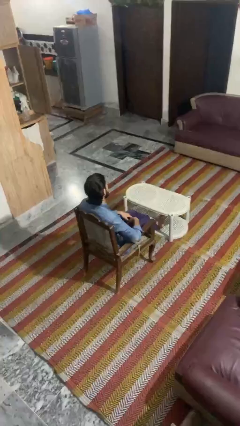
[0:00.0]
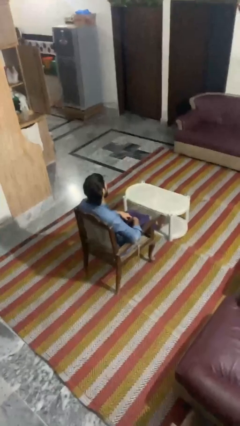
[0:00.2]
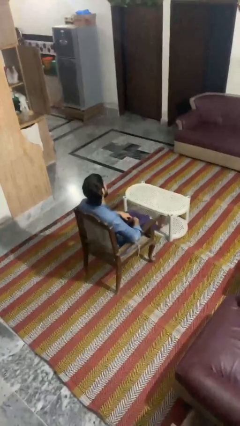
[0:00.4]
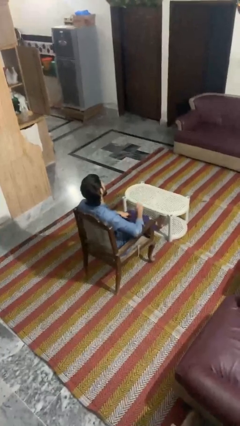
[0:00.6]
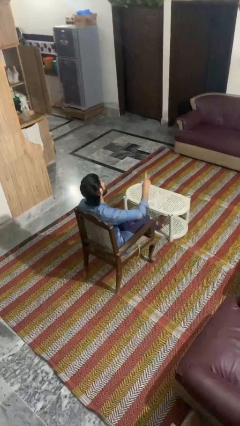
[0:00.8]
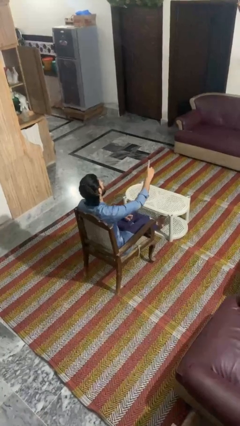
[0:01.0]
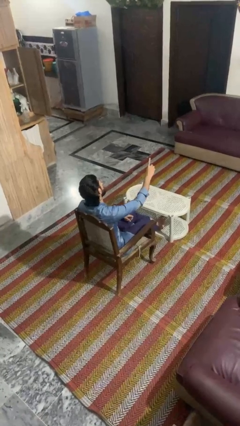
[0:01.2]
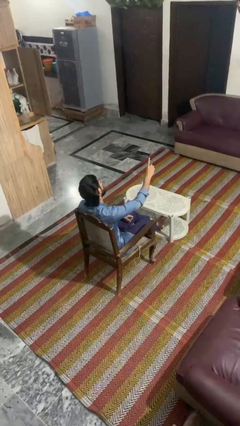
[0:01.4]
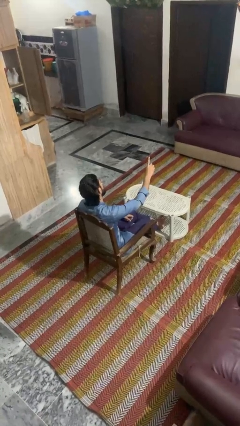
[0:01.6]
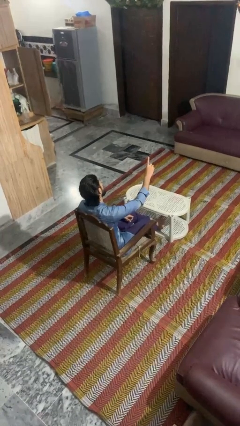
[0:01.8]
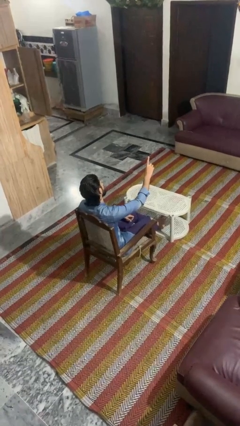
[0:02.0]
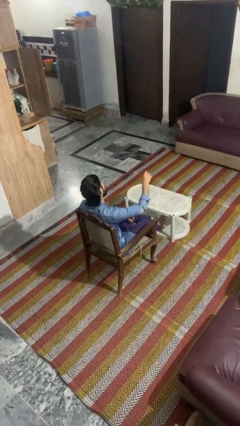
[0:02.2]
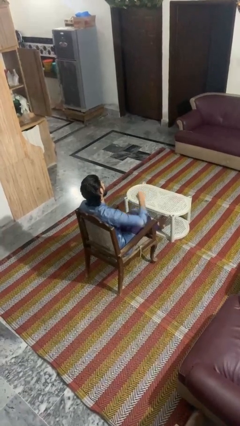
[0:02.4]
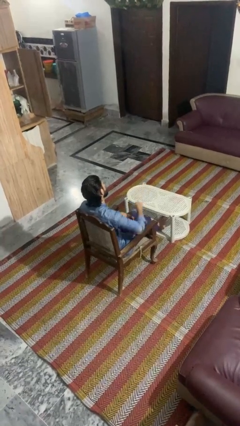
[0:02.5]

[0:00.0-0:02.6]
person gestures number one

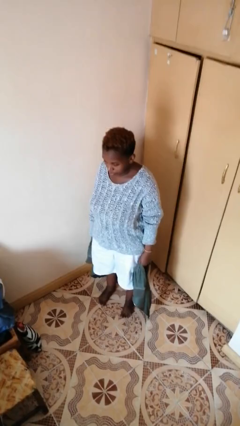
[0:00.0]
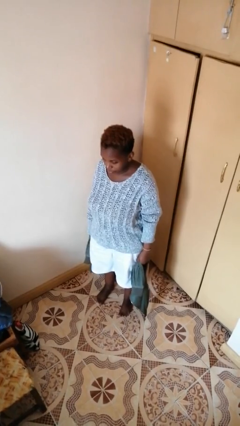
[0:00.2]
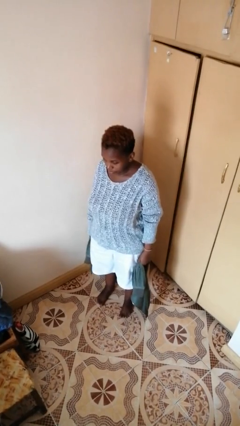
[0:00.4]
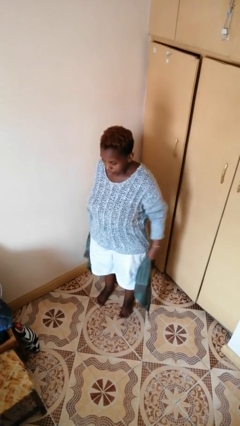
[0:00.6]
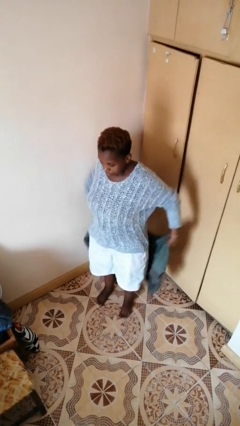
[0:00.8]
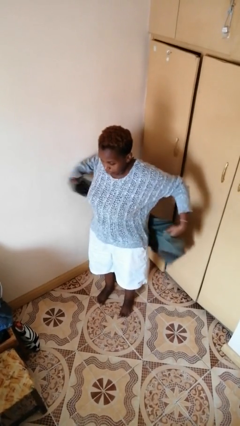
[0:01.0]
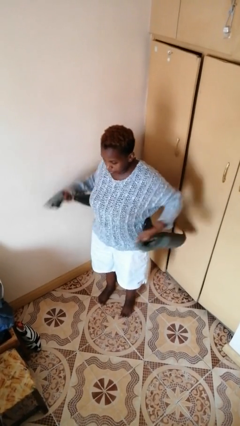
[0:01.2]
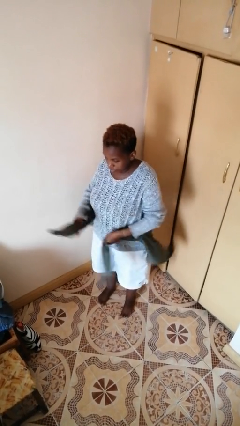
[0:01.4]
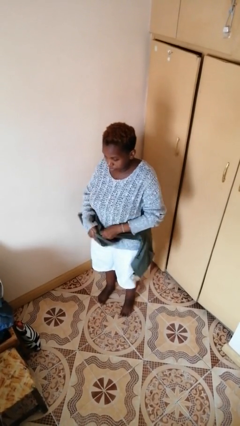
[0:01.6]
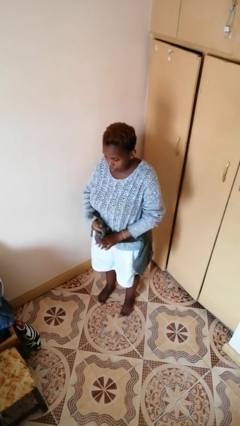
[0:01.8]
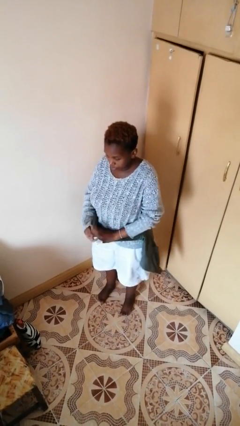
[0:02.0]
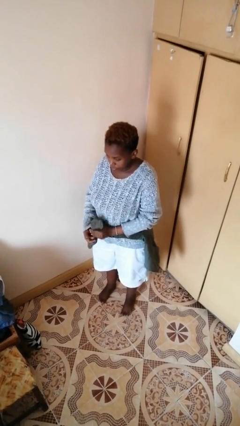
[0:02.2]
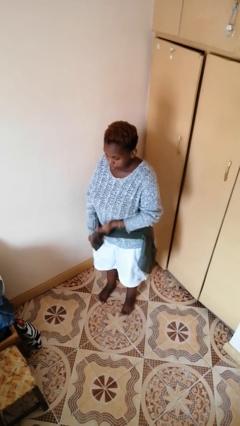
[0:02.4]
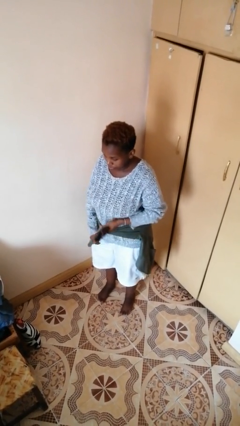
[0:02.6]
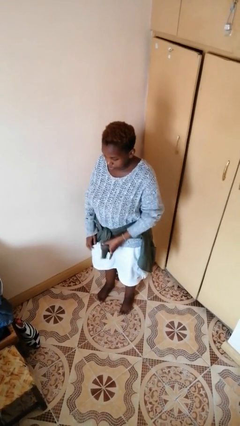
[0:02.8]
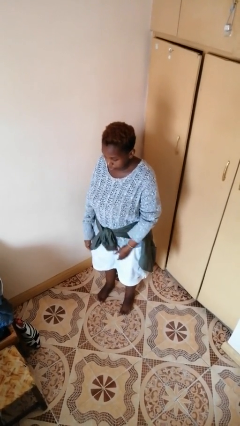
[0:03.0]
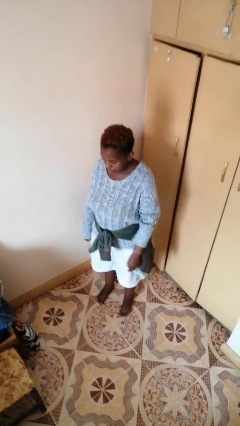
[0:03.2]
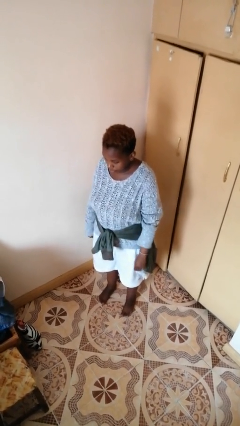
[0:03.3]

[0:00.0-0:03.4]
person ties jacket around waist

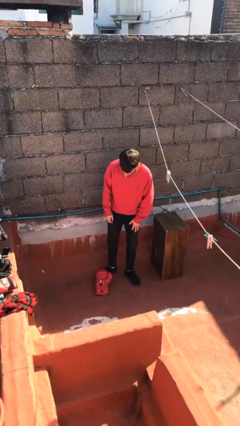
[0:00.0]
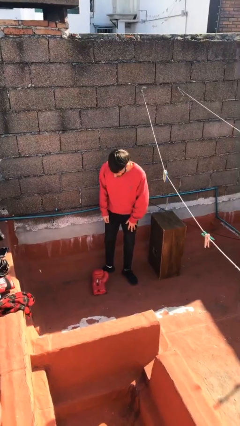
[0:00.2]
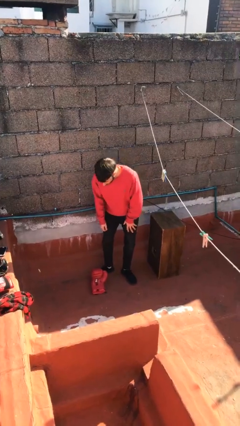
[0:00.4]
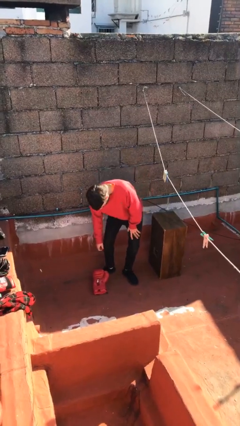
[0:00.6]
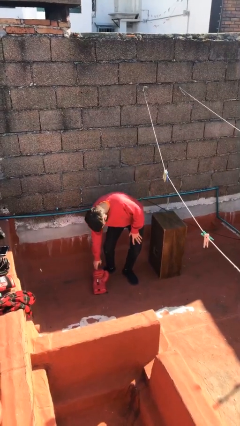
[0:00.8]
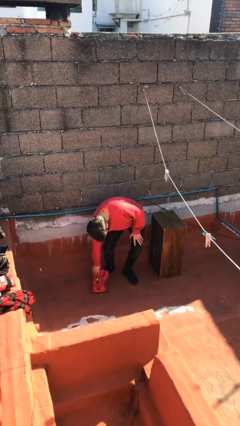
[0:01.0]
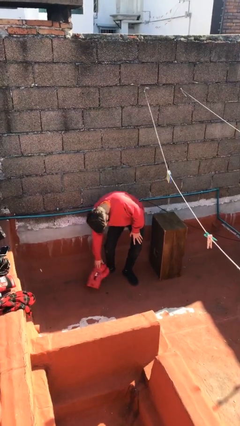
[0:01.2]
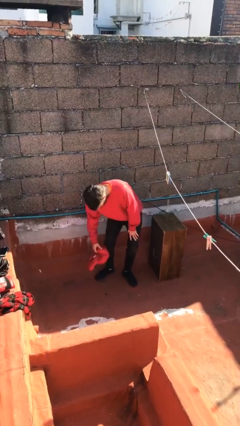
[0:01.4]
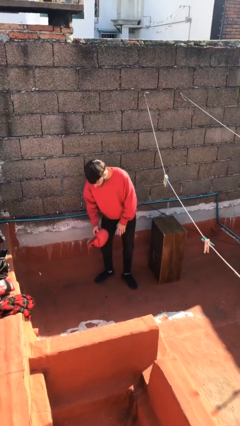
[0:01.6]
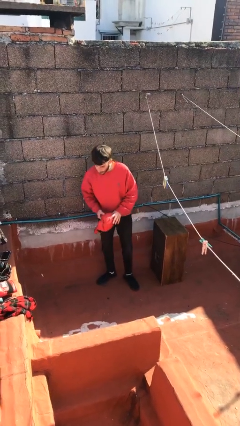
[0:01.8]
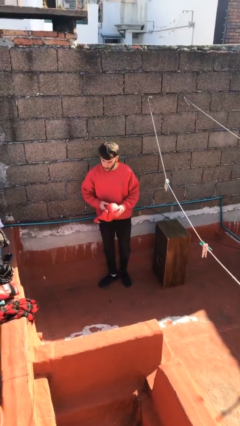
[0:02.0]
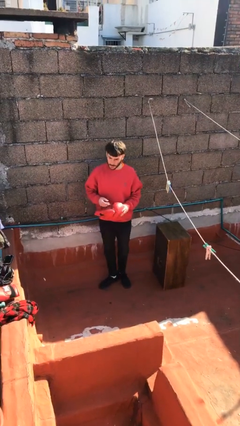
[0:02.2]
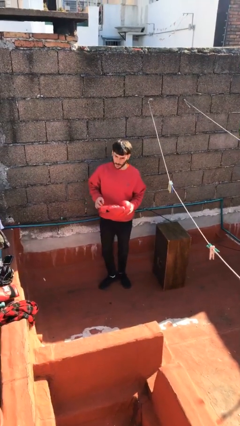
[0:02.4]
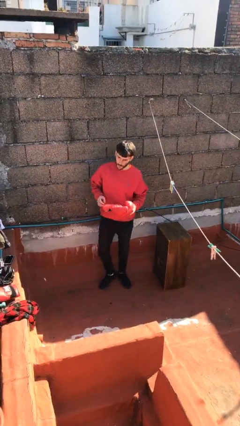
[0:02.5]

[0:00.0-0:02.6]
person picks up object from floor

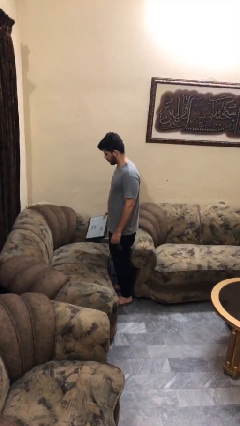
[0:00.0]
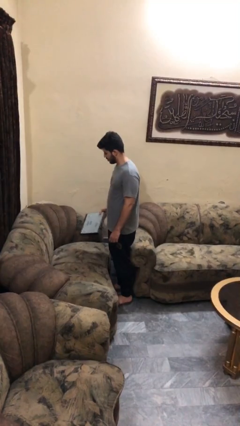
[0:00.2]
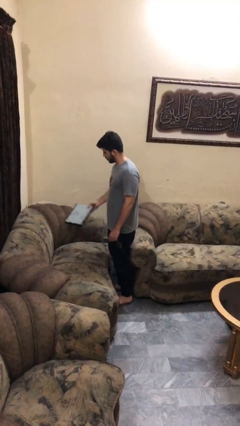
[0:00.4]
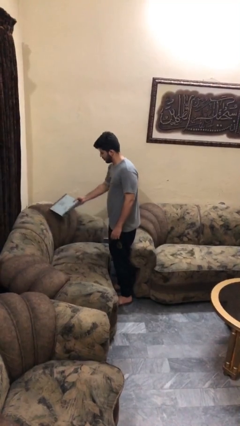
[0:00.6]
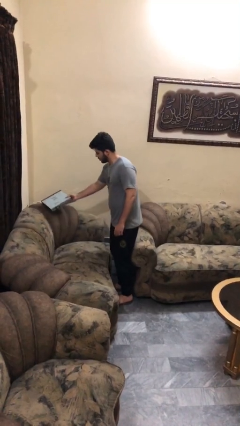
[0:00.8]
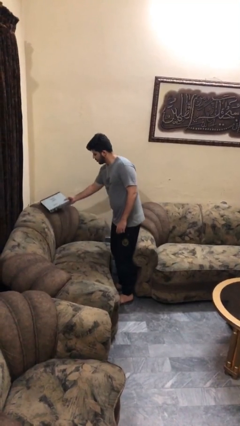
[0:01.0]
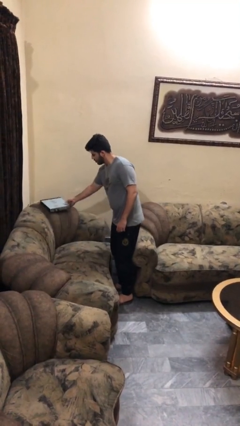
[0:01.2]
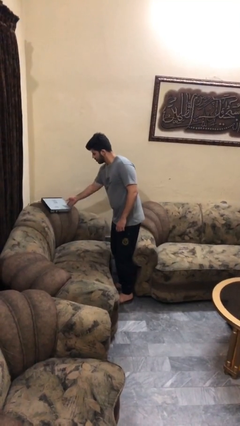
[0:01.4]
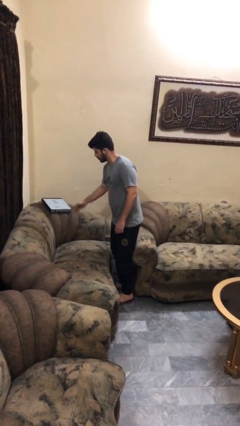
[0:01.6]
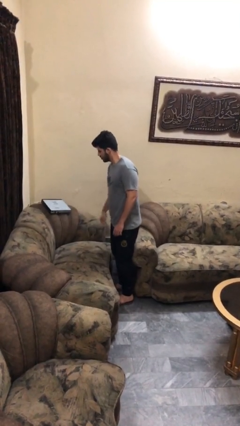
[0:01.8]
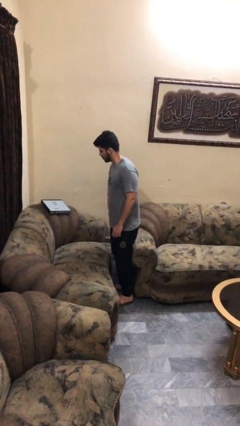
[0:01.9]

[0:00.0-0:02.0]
person puts down object on couch

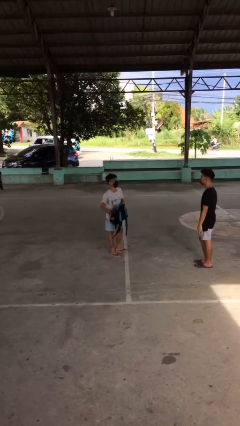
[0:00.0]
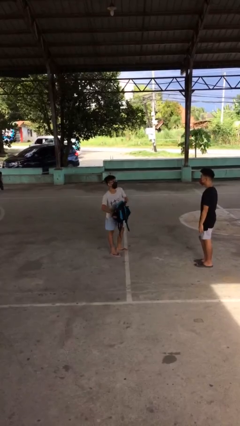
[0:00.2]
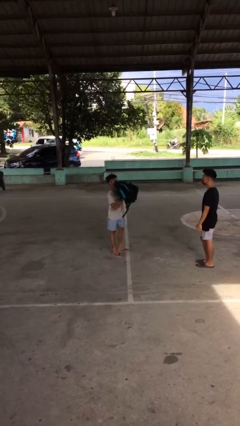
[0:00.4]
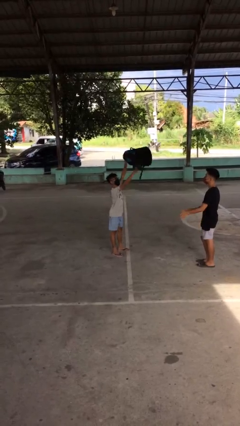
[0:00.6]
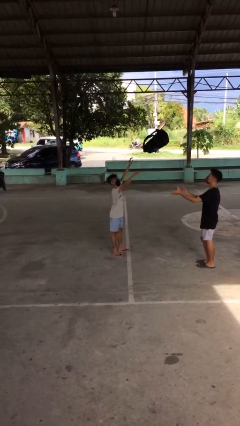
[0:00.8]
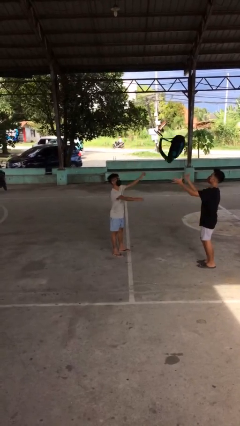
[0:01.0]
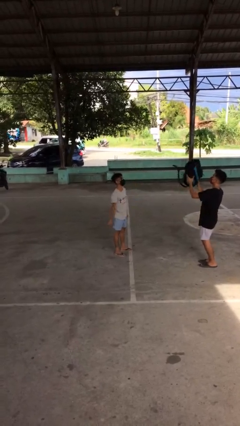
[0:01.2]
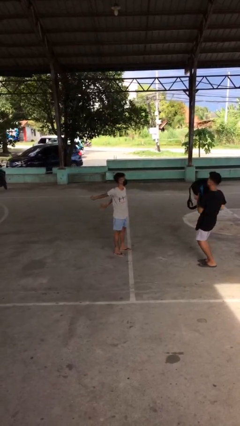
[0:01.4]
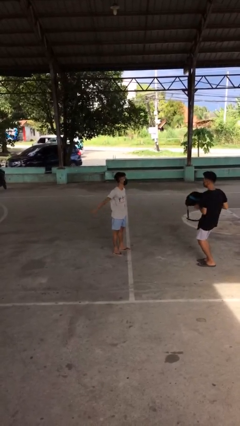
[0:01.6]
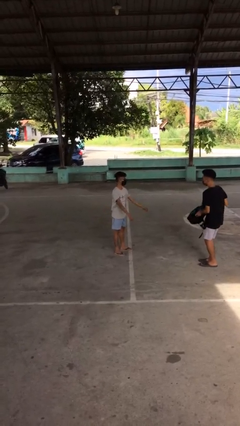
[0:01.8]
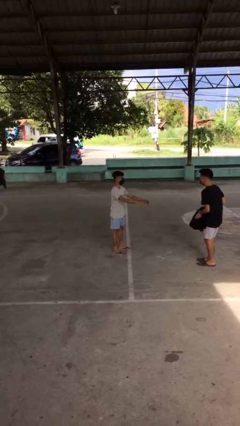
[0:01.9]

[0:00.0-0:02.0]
person throws object to person

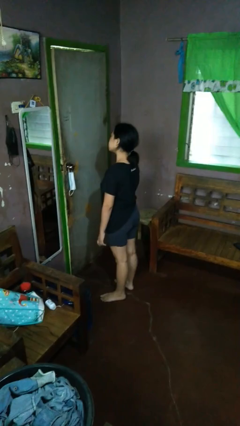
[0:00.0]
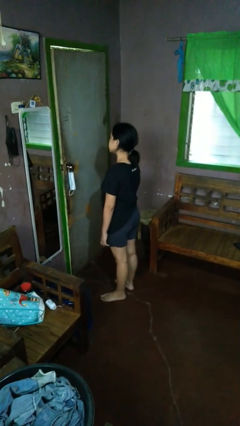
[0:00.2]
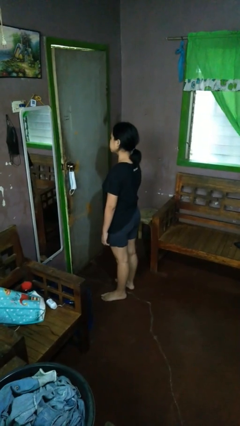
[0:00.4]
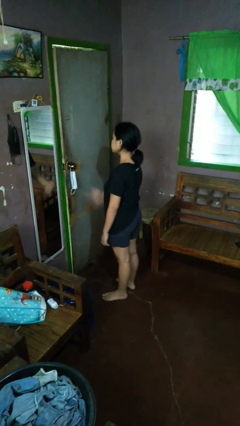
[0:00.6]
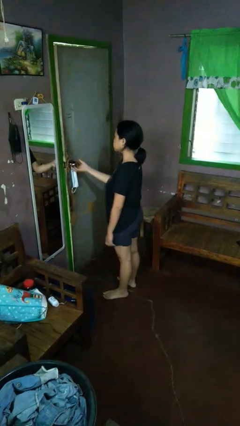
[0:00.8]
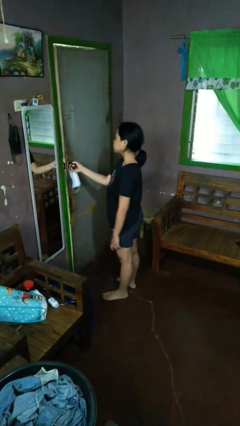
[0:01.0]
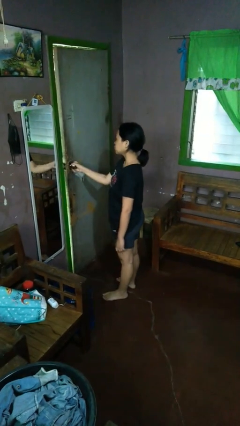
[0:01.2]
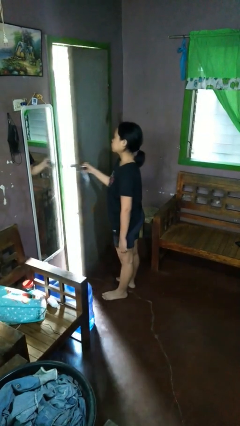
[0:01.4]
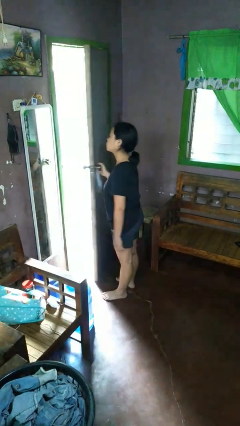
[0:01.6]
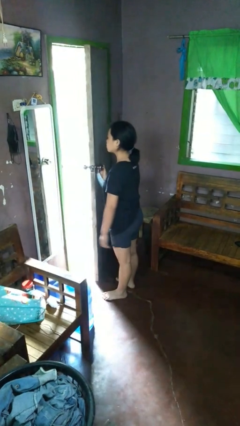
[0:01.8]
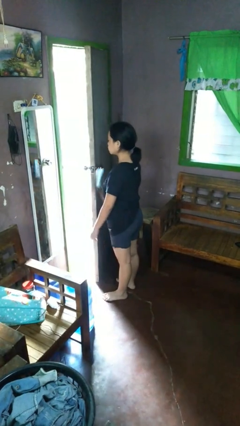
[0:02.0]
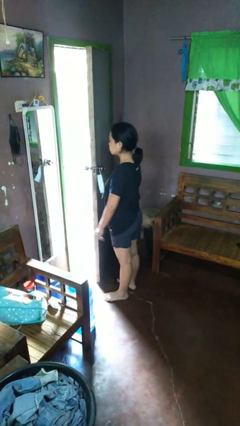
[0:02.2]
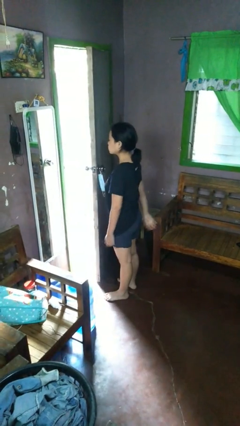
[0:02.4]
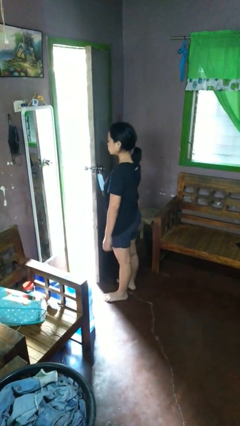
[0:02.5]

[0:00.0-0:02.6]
person opens facility door

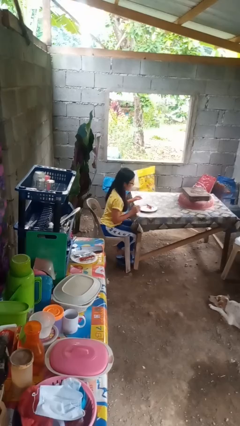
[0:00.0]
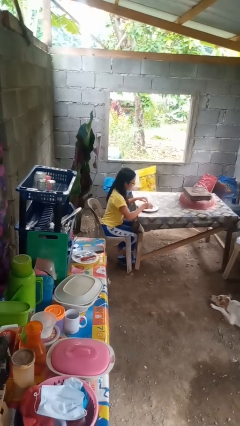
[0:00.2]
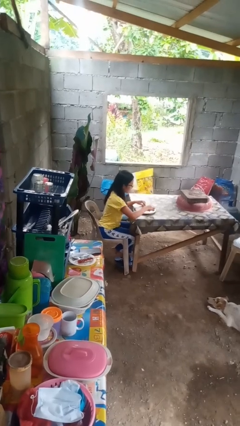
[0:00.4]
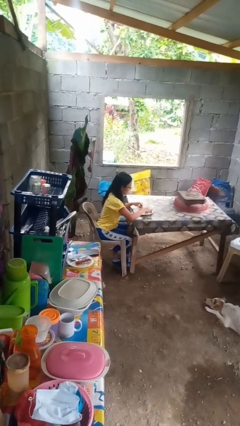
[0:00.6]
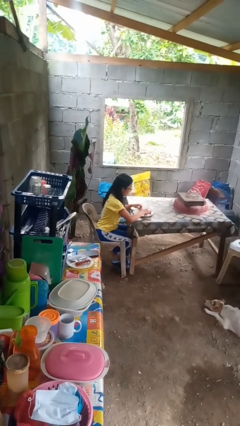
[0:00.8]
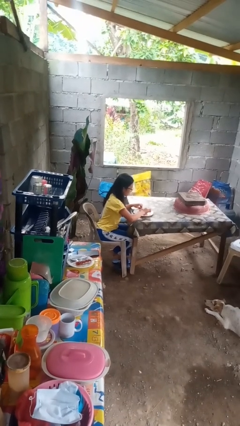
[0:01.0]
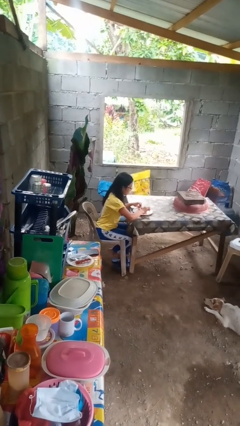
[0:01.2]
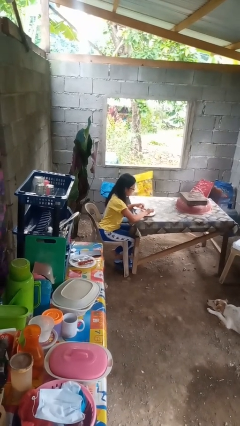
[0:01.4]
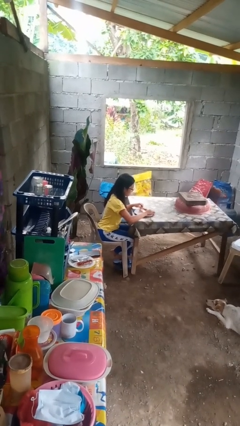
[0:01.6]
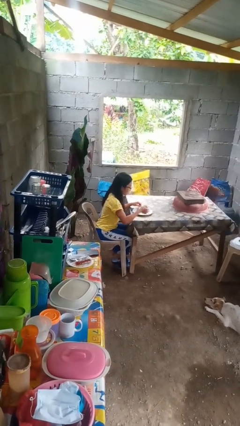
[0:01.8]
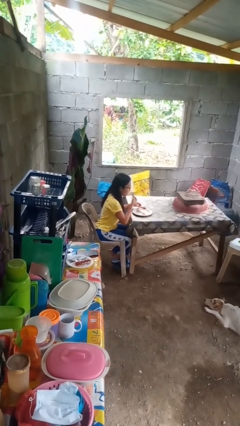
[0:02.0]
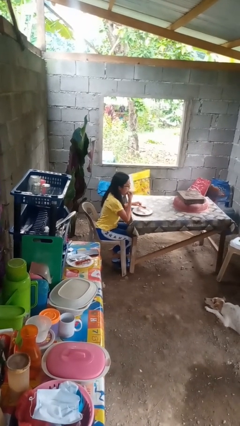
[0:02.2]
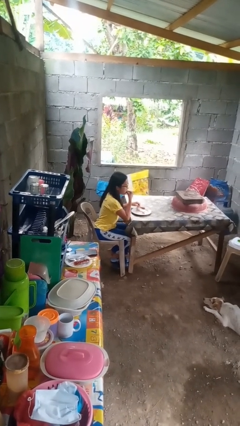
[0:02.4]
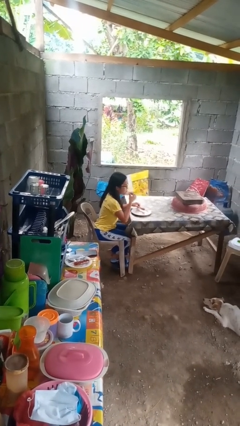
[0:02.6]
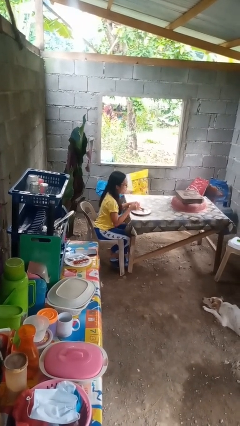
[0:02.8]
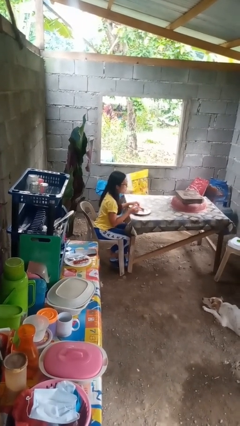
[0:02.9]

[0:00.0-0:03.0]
person eats with hands
